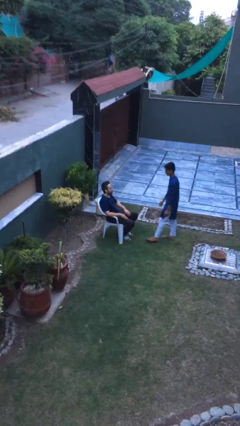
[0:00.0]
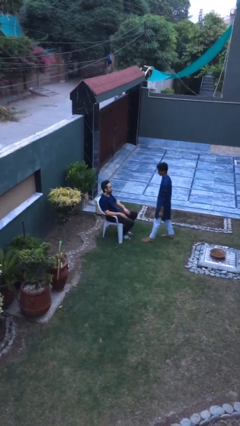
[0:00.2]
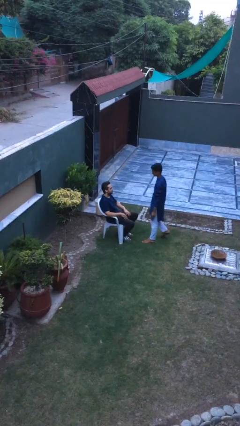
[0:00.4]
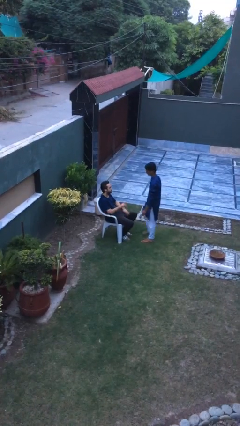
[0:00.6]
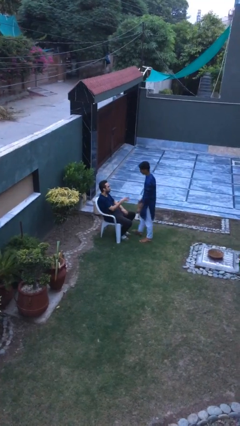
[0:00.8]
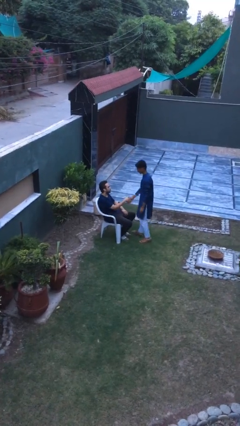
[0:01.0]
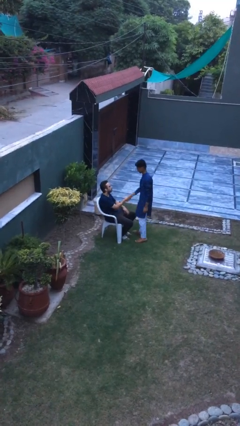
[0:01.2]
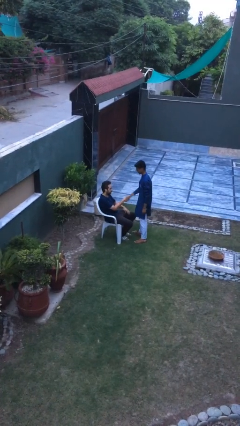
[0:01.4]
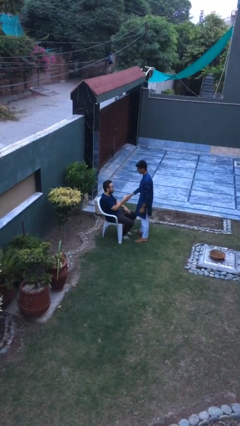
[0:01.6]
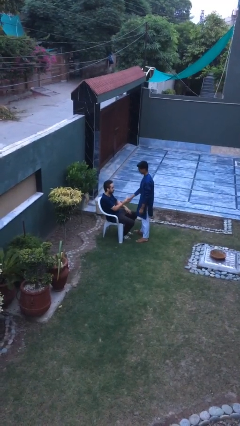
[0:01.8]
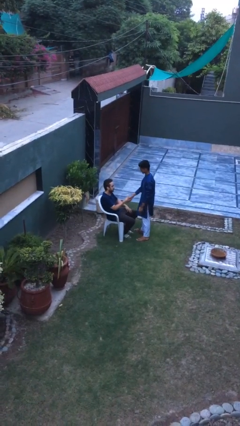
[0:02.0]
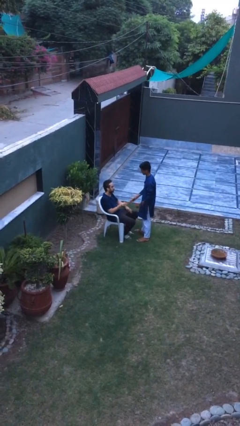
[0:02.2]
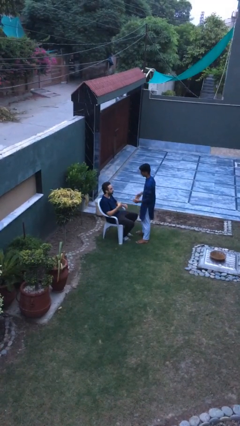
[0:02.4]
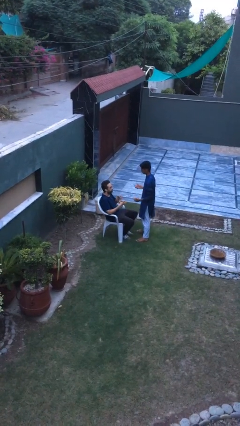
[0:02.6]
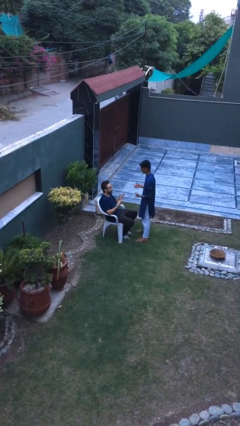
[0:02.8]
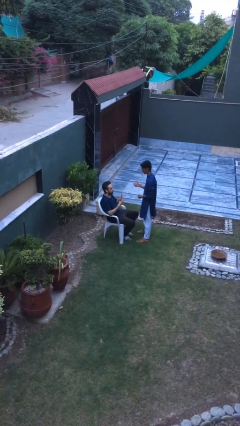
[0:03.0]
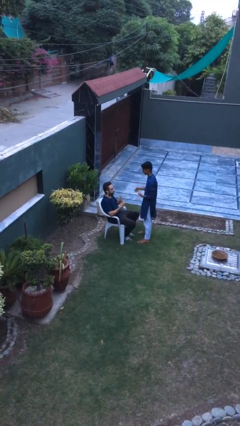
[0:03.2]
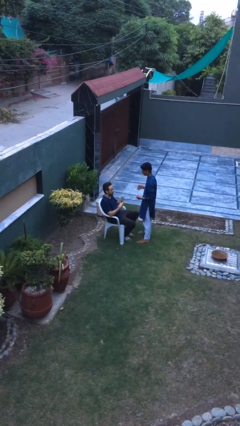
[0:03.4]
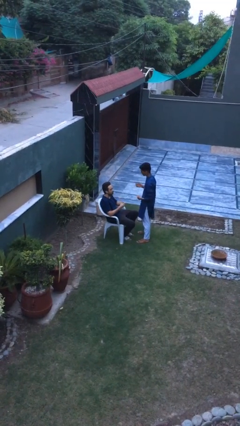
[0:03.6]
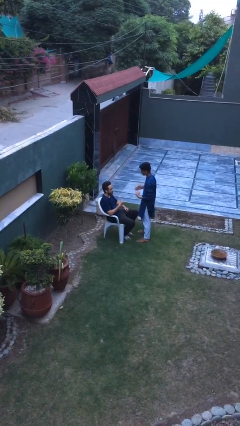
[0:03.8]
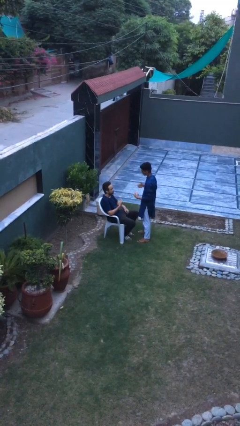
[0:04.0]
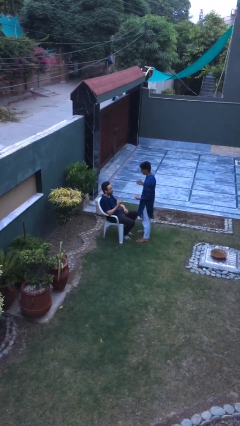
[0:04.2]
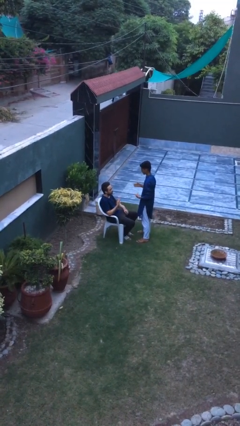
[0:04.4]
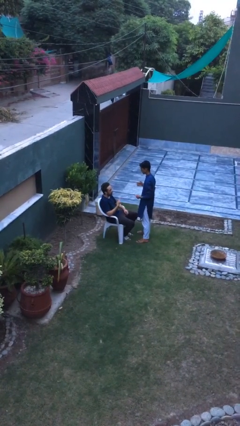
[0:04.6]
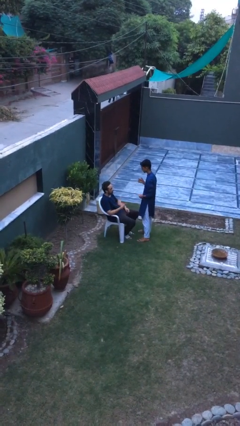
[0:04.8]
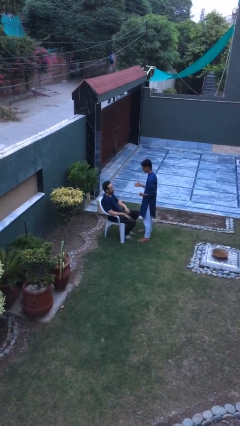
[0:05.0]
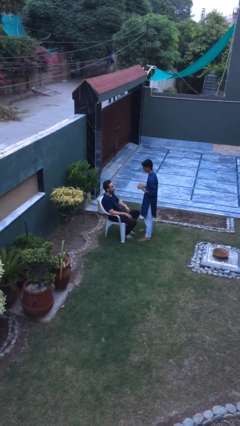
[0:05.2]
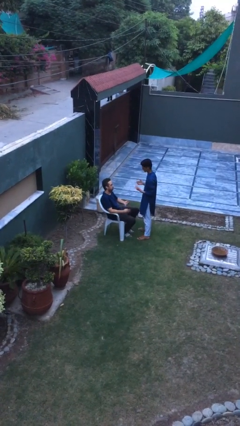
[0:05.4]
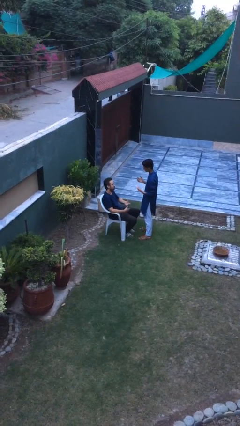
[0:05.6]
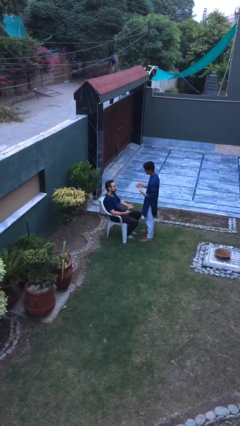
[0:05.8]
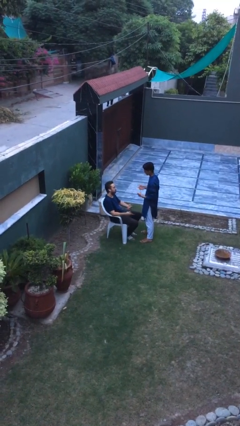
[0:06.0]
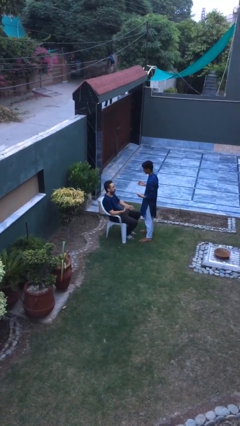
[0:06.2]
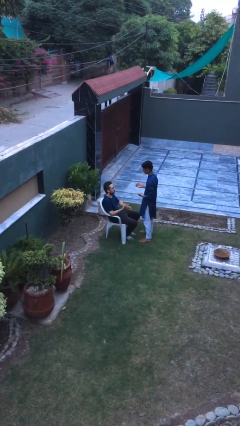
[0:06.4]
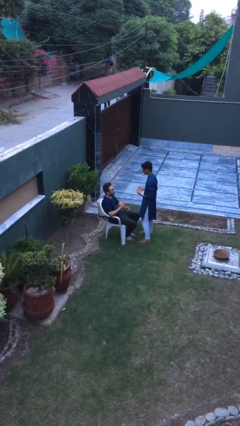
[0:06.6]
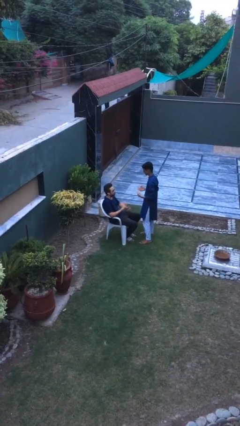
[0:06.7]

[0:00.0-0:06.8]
person shakes hand

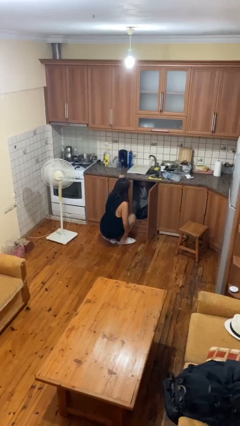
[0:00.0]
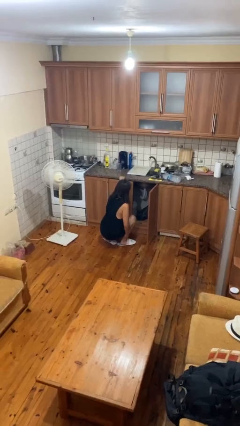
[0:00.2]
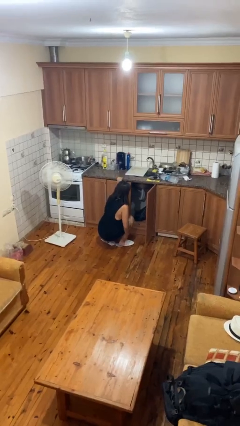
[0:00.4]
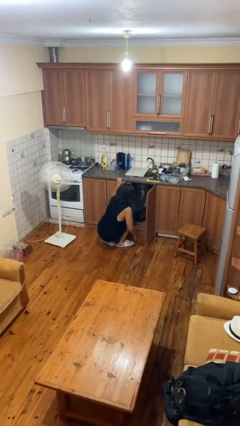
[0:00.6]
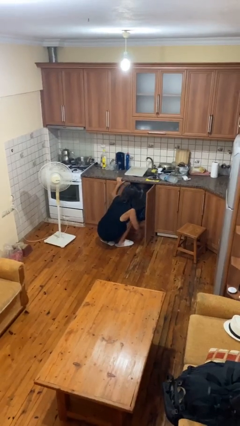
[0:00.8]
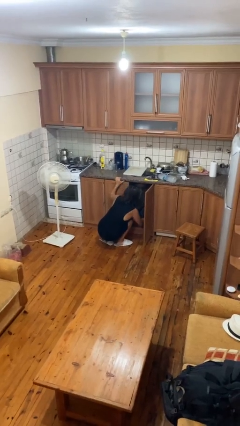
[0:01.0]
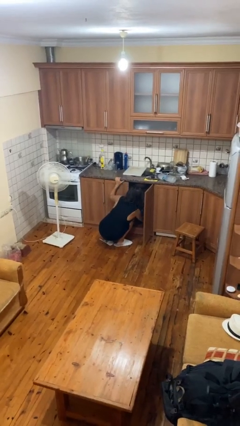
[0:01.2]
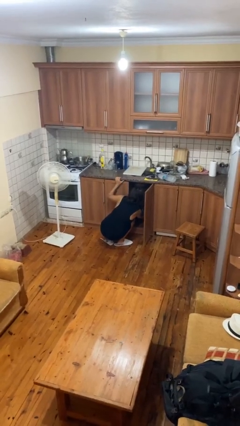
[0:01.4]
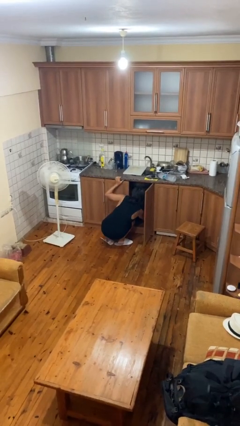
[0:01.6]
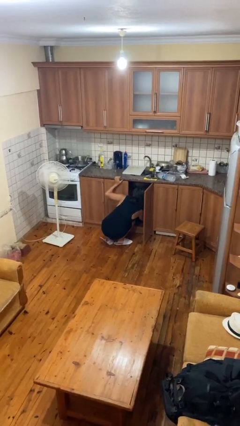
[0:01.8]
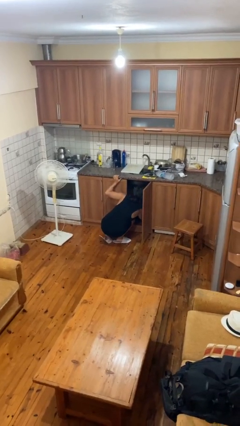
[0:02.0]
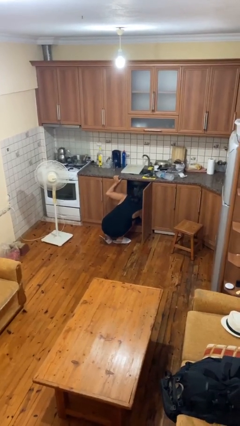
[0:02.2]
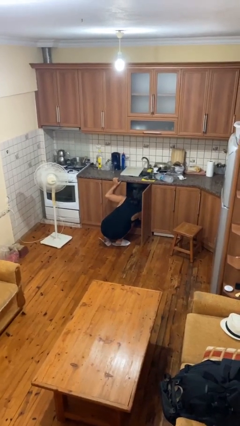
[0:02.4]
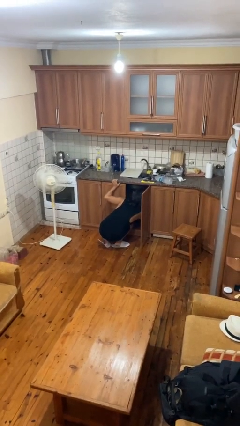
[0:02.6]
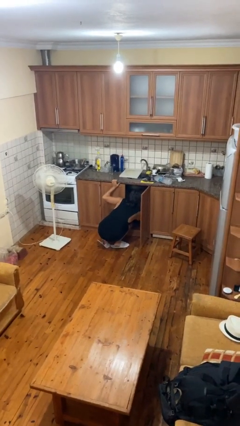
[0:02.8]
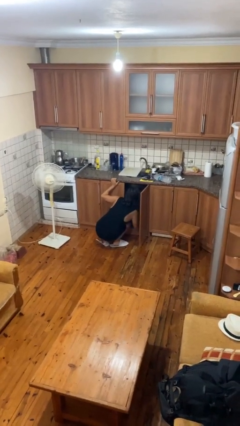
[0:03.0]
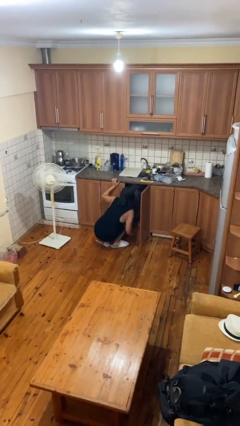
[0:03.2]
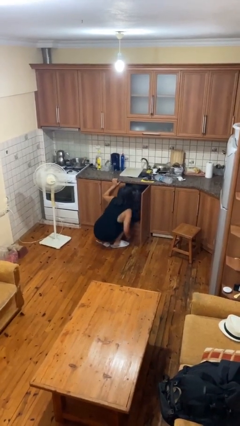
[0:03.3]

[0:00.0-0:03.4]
person searches in cabinet

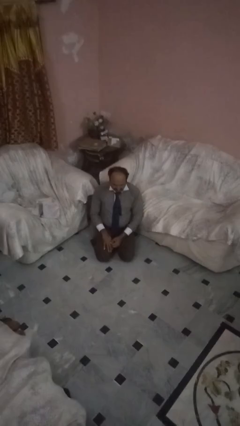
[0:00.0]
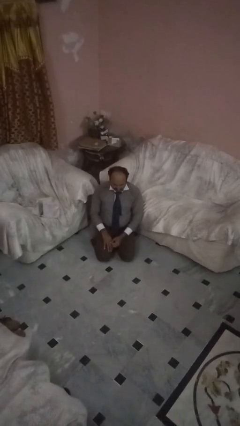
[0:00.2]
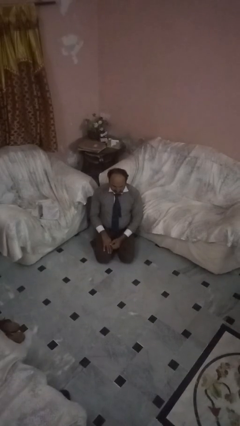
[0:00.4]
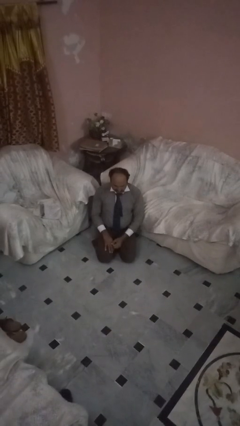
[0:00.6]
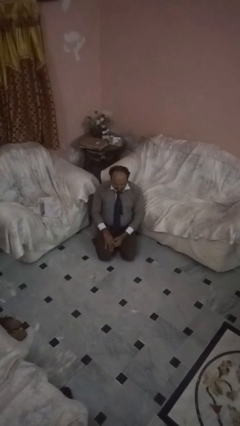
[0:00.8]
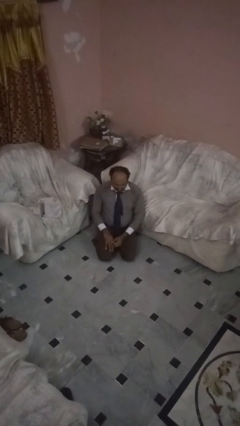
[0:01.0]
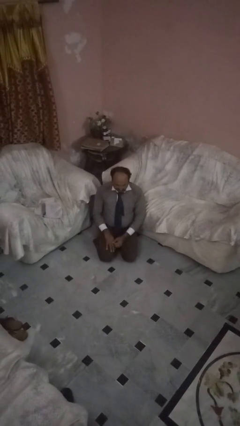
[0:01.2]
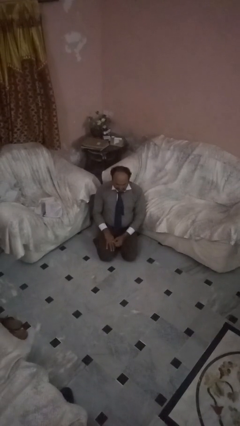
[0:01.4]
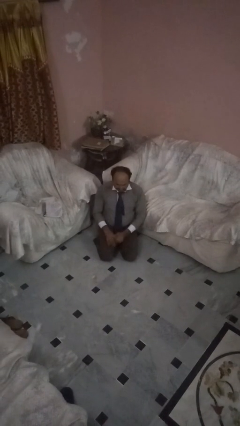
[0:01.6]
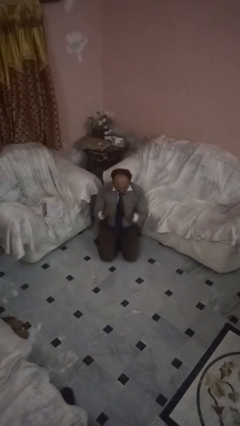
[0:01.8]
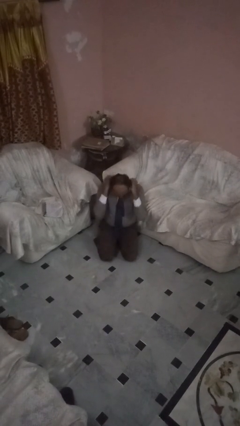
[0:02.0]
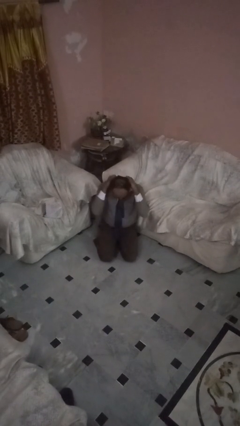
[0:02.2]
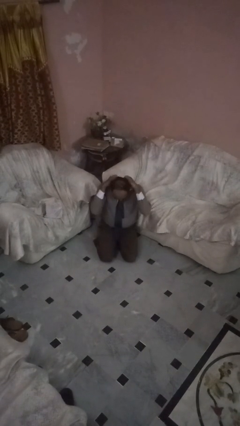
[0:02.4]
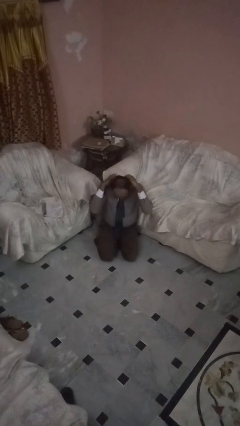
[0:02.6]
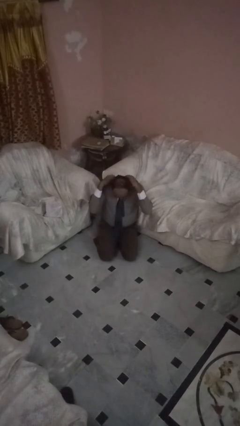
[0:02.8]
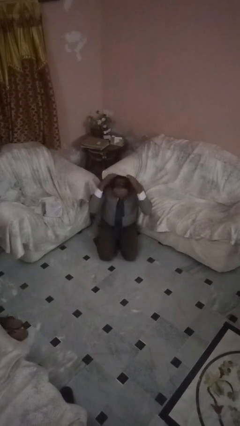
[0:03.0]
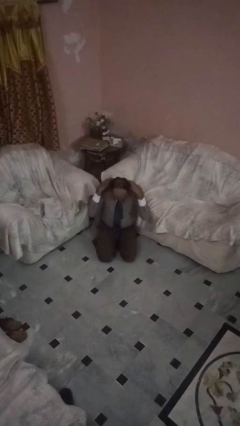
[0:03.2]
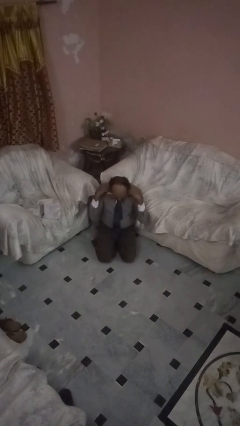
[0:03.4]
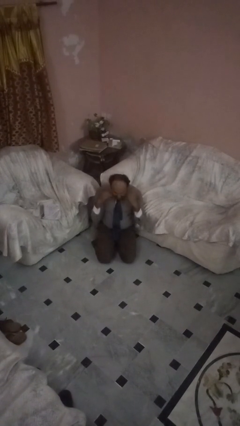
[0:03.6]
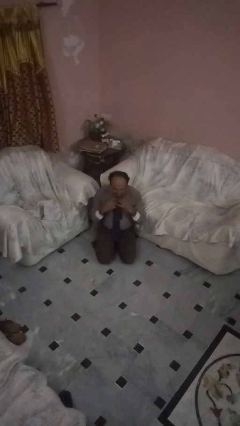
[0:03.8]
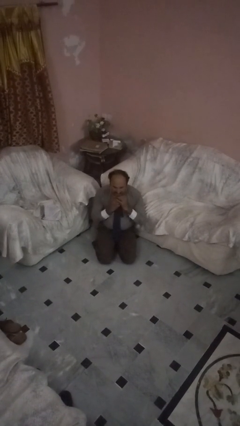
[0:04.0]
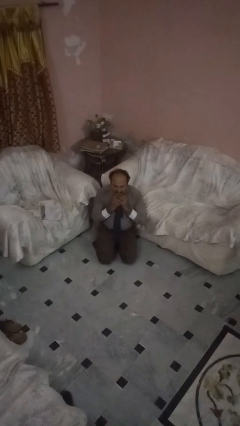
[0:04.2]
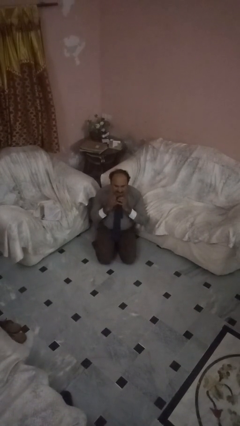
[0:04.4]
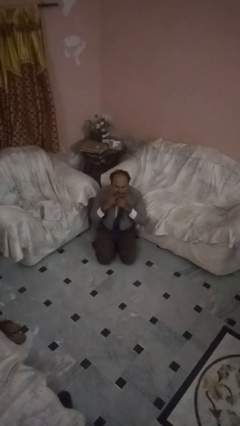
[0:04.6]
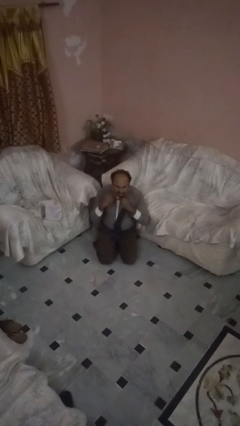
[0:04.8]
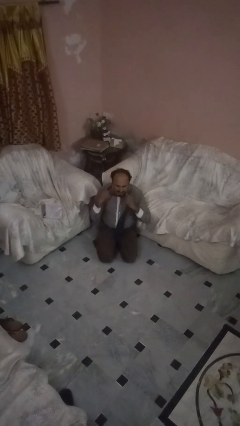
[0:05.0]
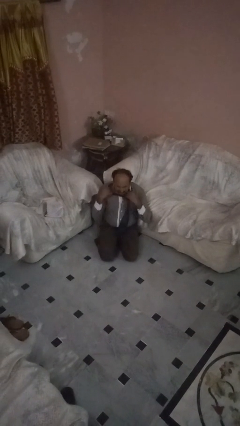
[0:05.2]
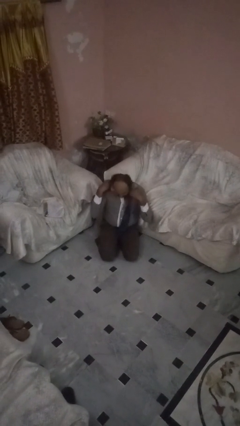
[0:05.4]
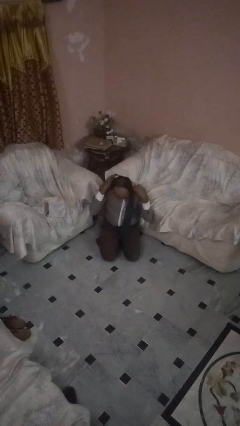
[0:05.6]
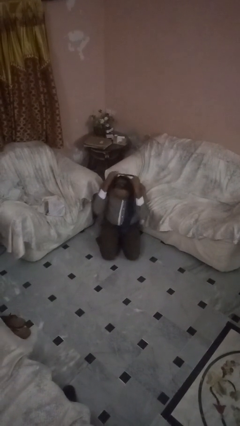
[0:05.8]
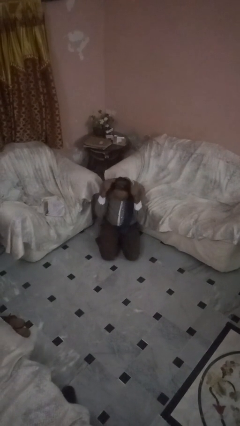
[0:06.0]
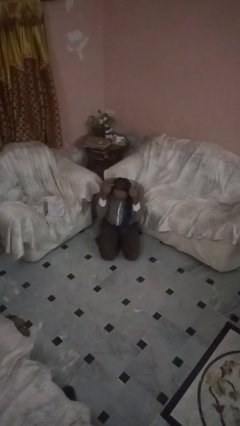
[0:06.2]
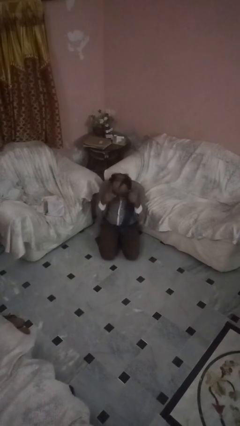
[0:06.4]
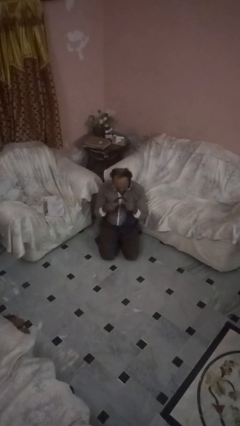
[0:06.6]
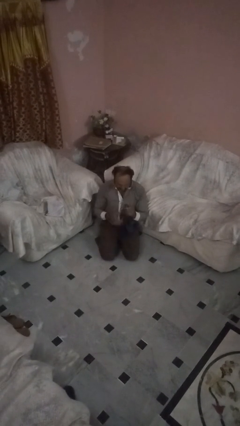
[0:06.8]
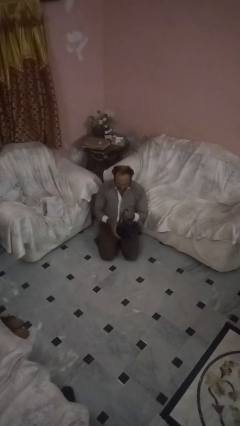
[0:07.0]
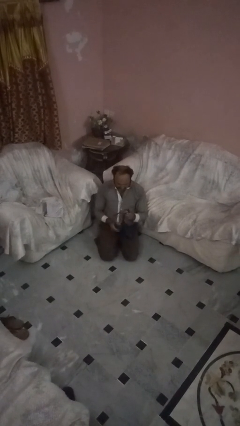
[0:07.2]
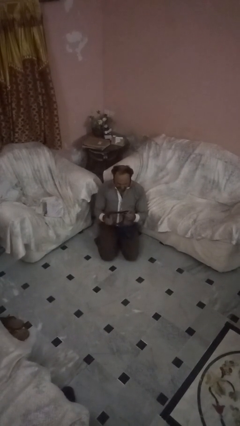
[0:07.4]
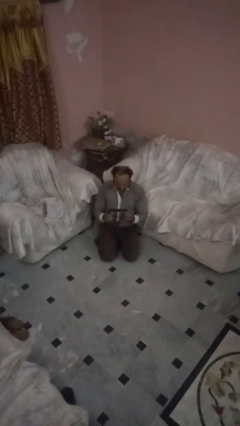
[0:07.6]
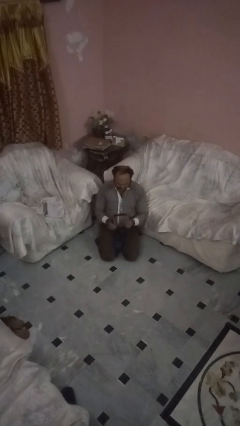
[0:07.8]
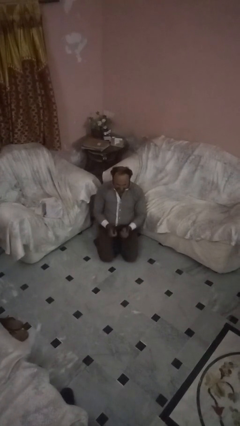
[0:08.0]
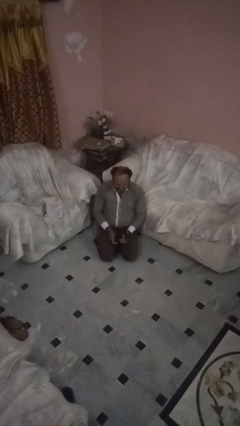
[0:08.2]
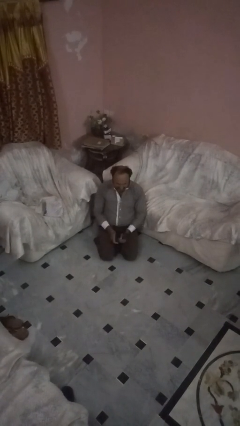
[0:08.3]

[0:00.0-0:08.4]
person takes off necktie
